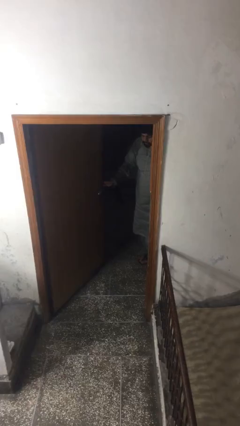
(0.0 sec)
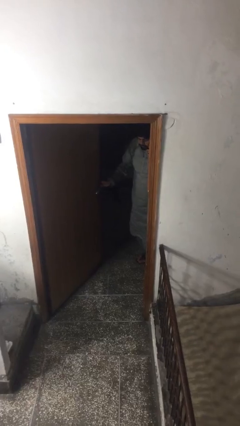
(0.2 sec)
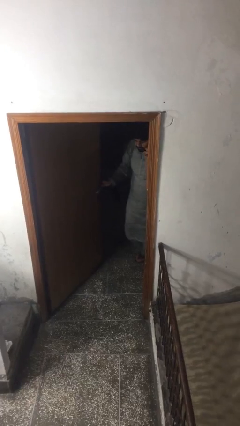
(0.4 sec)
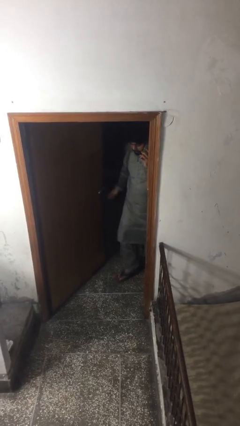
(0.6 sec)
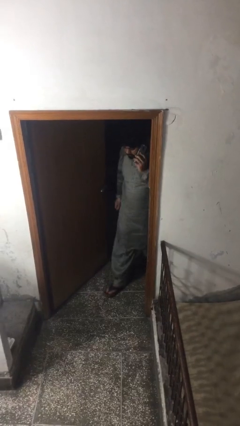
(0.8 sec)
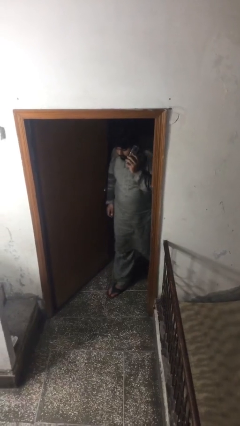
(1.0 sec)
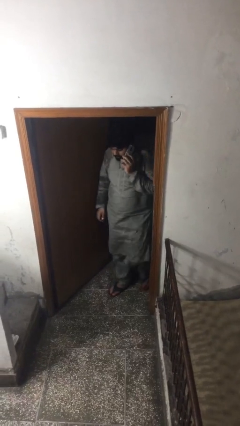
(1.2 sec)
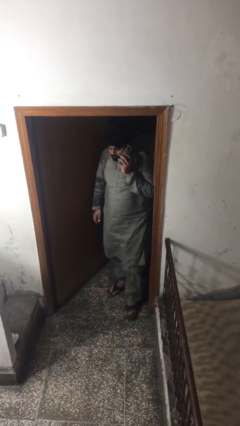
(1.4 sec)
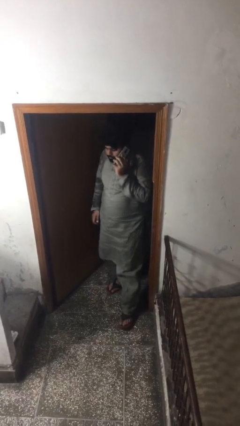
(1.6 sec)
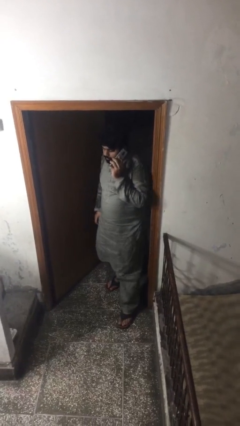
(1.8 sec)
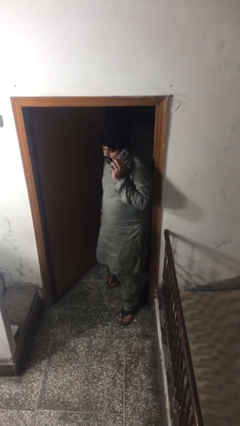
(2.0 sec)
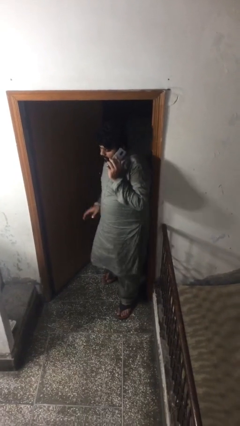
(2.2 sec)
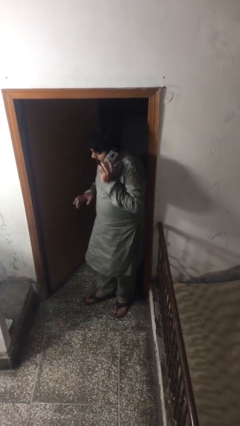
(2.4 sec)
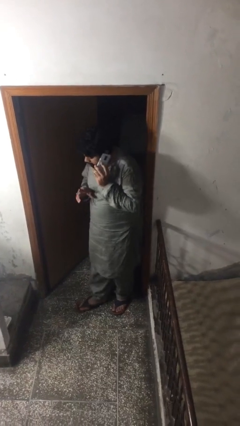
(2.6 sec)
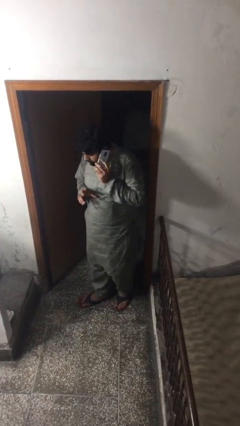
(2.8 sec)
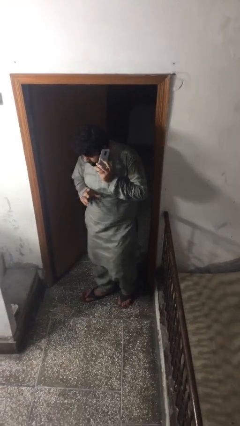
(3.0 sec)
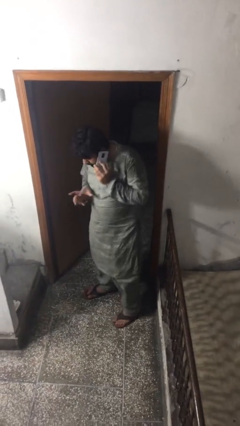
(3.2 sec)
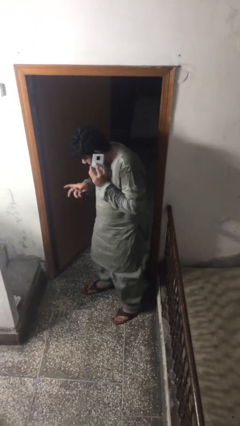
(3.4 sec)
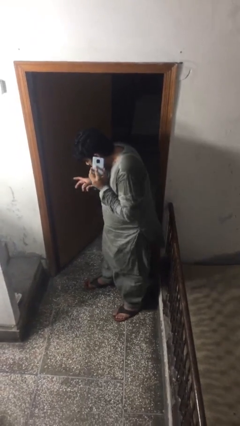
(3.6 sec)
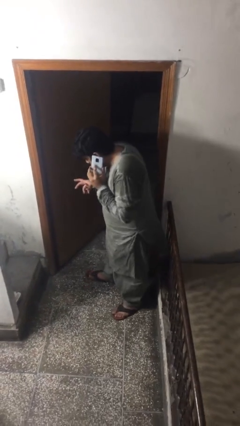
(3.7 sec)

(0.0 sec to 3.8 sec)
person enters scene through structure

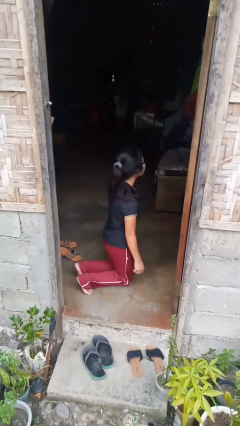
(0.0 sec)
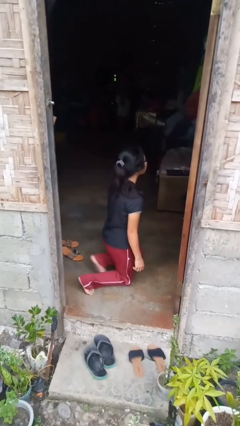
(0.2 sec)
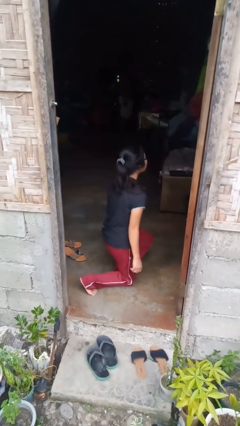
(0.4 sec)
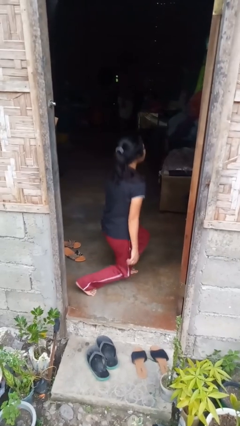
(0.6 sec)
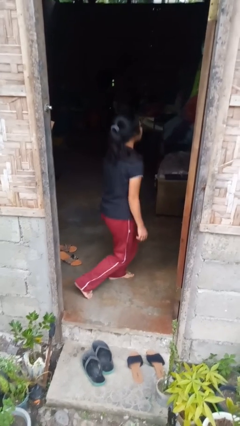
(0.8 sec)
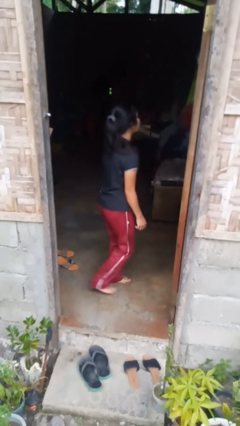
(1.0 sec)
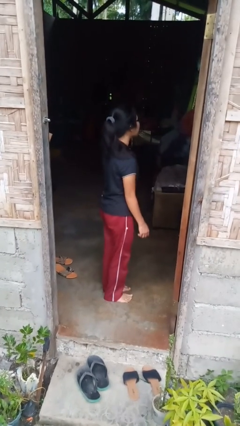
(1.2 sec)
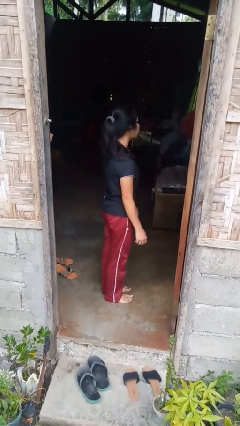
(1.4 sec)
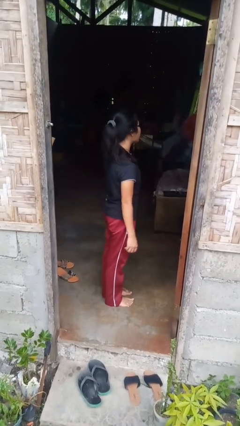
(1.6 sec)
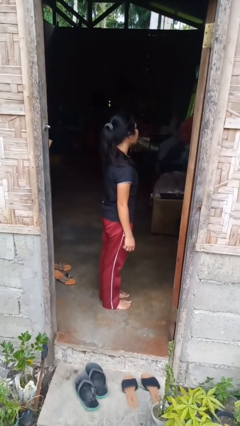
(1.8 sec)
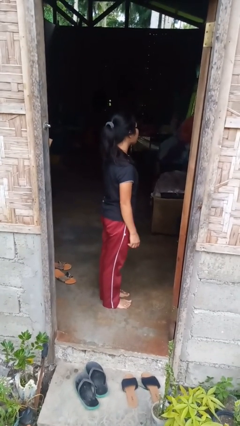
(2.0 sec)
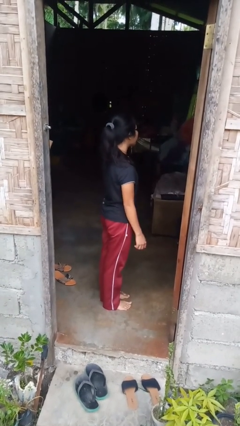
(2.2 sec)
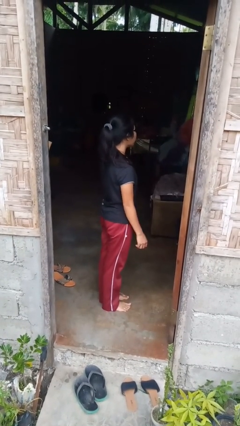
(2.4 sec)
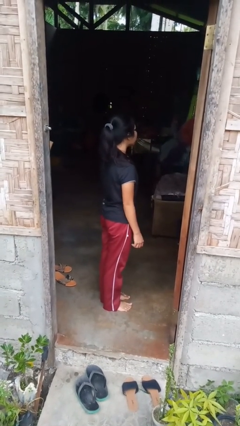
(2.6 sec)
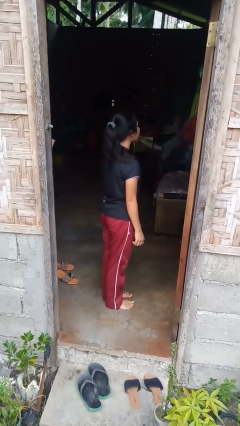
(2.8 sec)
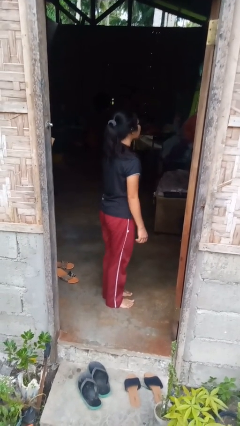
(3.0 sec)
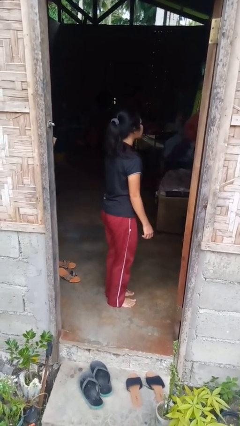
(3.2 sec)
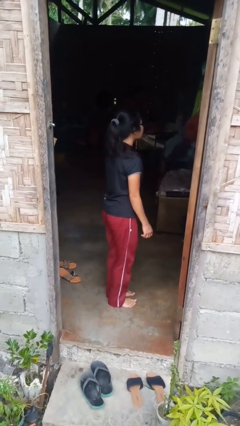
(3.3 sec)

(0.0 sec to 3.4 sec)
person stands up from floor

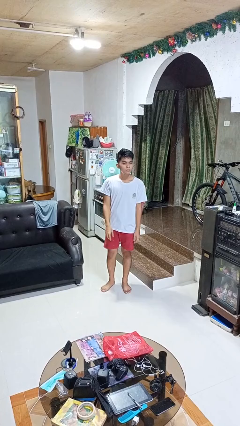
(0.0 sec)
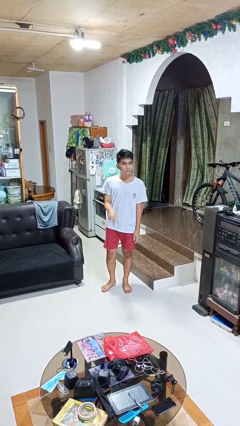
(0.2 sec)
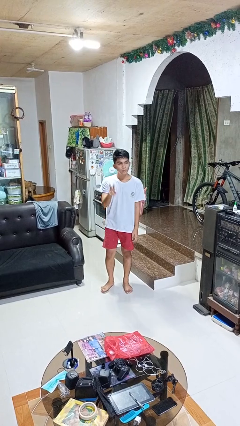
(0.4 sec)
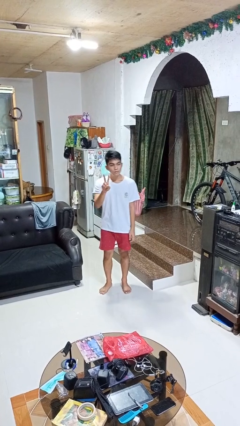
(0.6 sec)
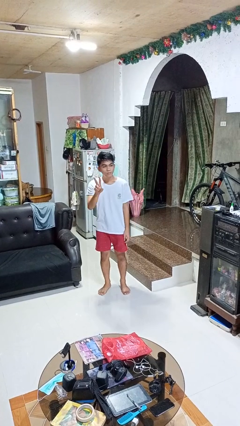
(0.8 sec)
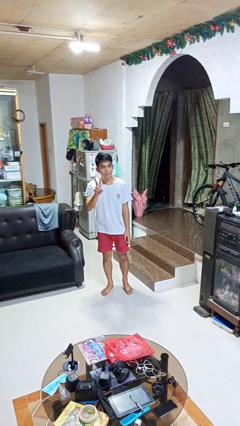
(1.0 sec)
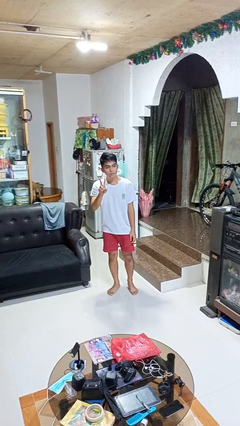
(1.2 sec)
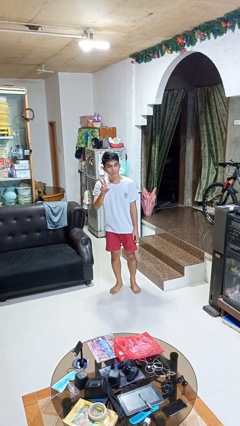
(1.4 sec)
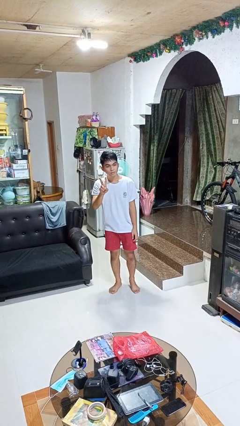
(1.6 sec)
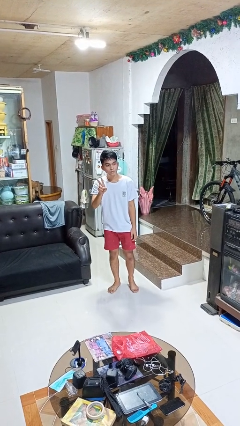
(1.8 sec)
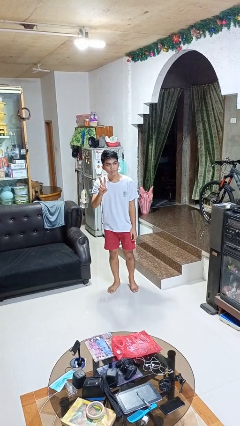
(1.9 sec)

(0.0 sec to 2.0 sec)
person gestures peace

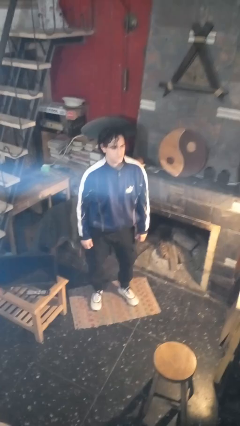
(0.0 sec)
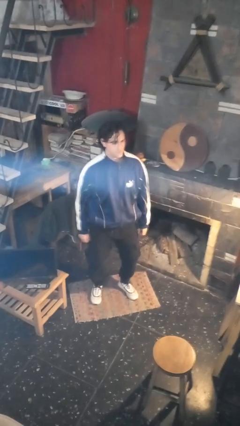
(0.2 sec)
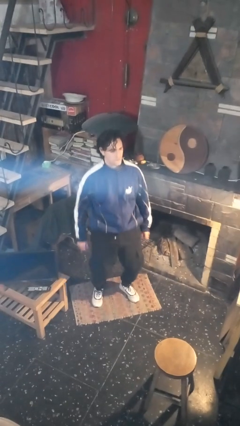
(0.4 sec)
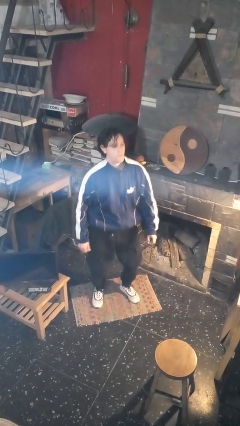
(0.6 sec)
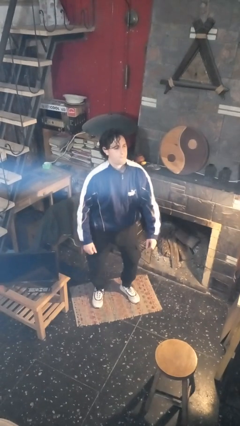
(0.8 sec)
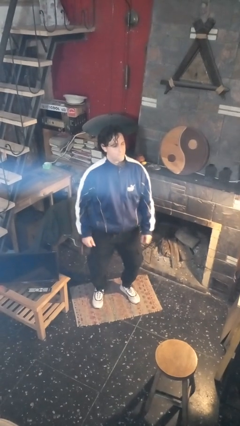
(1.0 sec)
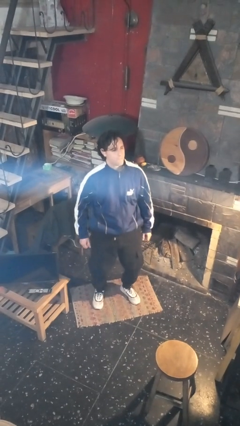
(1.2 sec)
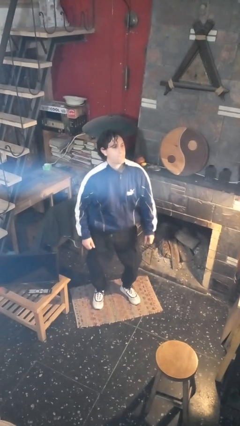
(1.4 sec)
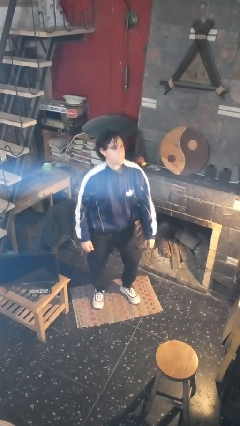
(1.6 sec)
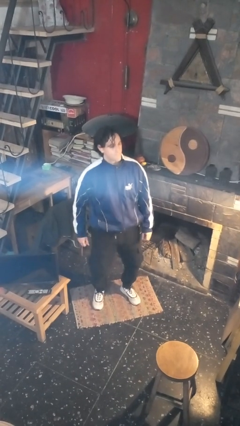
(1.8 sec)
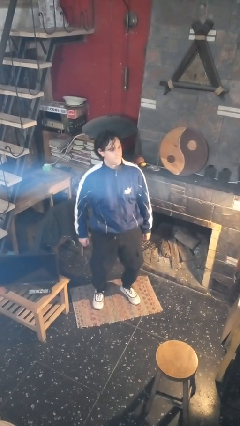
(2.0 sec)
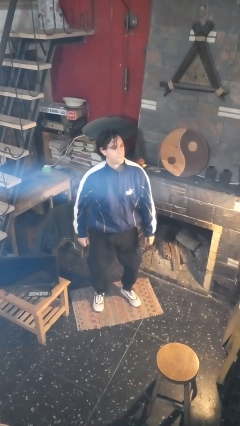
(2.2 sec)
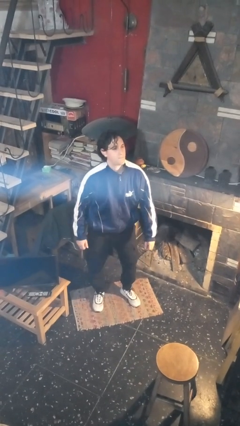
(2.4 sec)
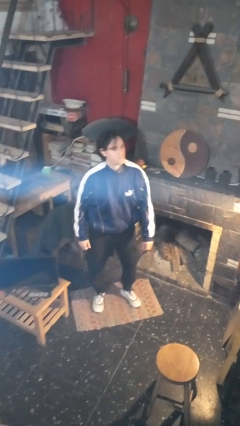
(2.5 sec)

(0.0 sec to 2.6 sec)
person wiggles hips

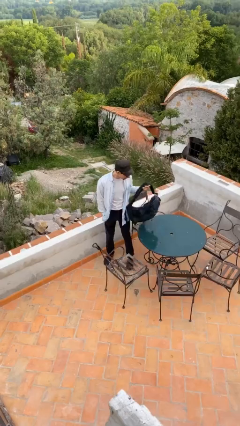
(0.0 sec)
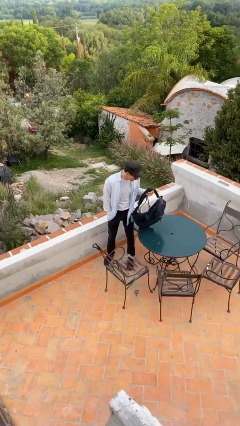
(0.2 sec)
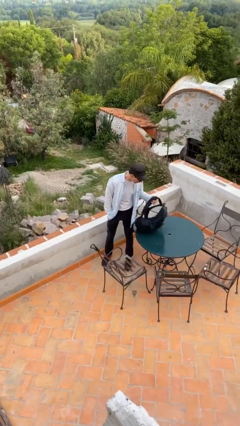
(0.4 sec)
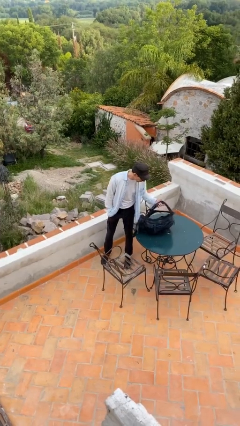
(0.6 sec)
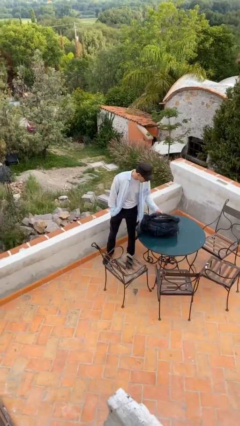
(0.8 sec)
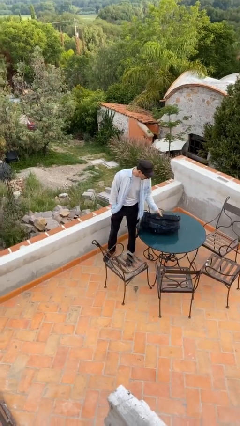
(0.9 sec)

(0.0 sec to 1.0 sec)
person puts down object on table

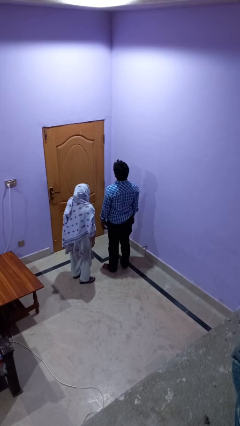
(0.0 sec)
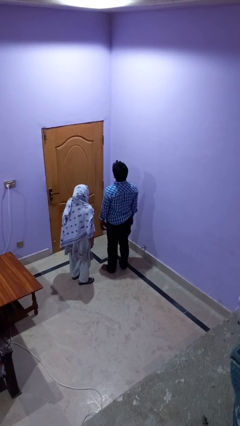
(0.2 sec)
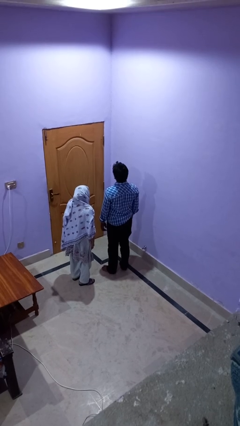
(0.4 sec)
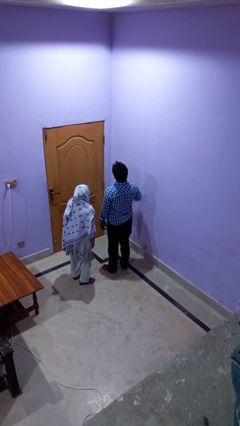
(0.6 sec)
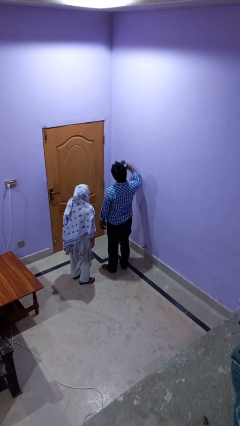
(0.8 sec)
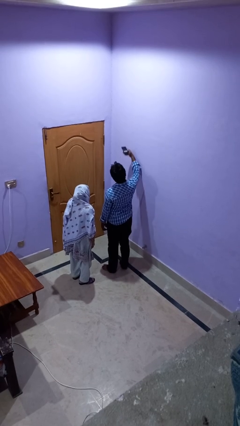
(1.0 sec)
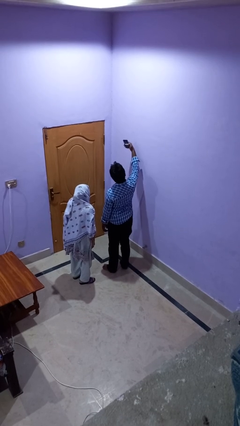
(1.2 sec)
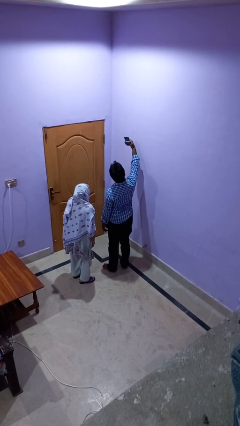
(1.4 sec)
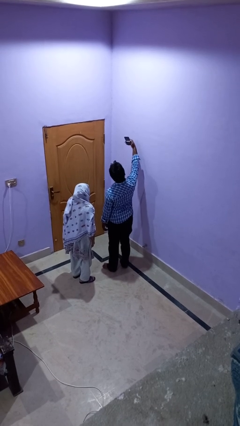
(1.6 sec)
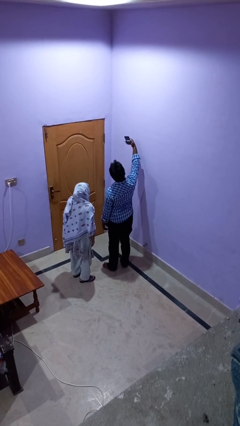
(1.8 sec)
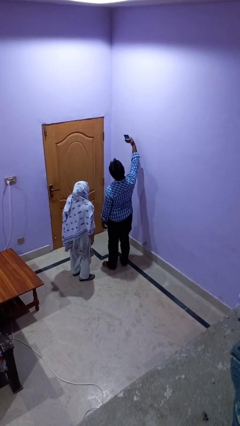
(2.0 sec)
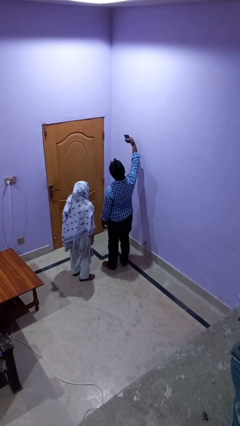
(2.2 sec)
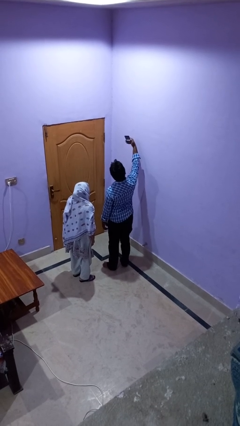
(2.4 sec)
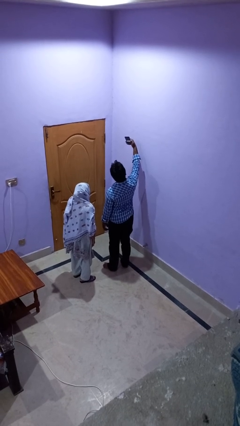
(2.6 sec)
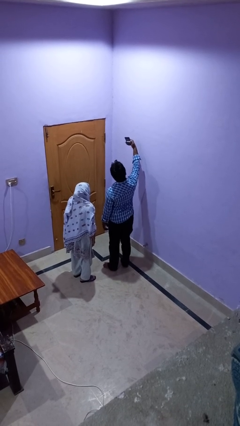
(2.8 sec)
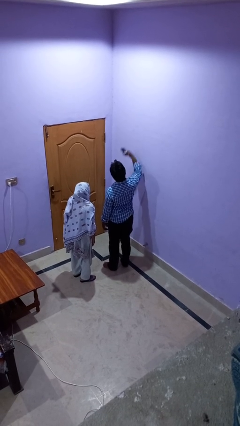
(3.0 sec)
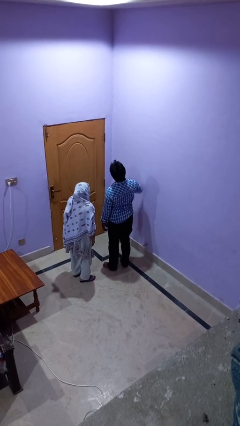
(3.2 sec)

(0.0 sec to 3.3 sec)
person takes selfie with person

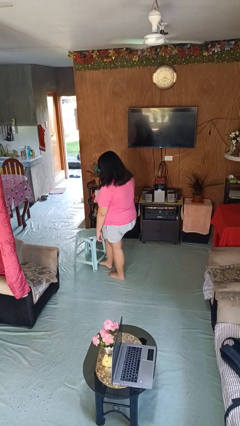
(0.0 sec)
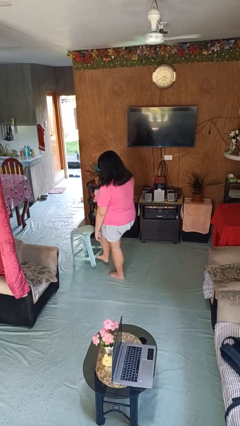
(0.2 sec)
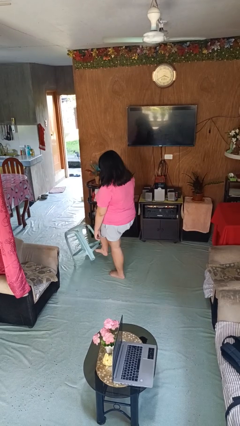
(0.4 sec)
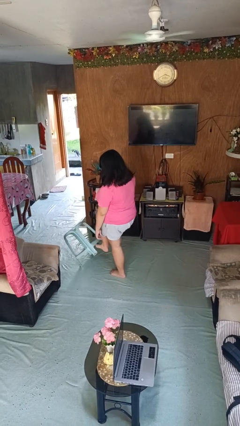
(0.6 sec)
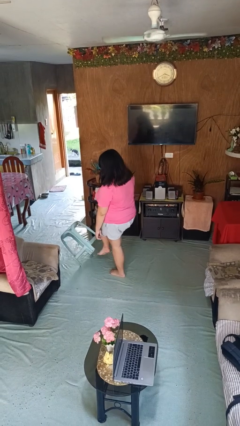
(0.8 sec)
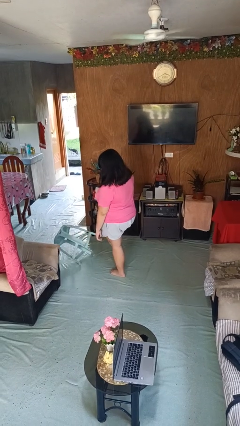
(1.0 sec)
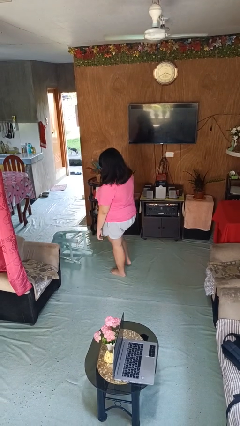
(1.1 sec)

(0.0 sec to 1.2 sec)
person knocks over furniture
